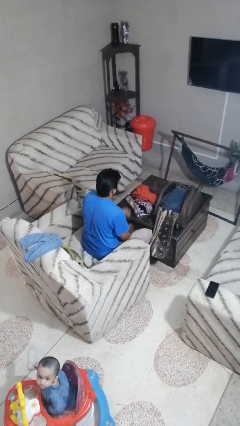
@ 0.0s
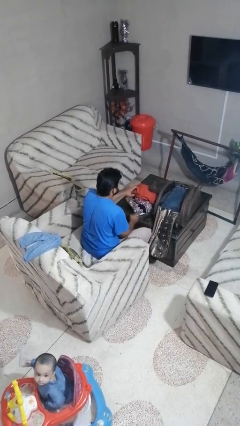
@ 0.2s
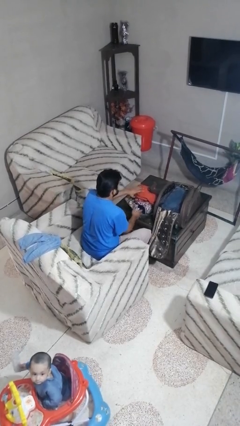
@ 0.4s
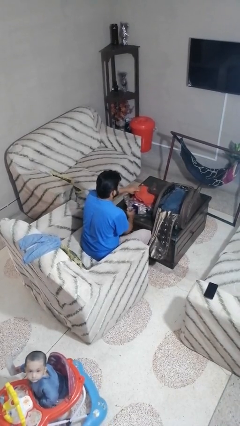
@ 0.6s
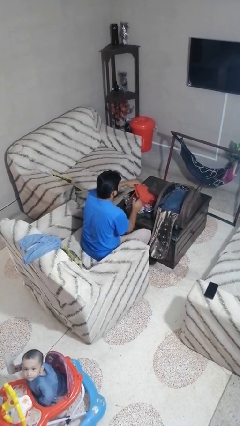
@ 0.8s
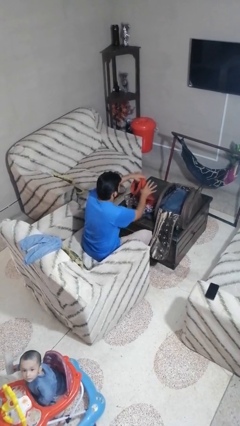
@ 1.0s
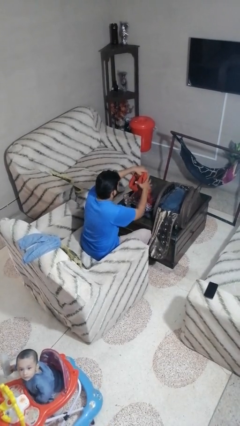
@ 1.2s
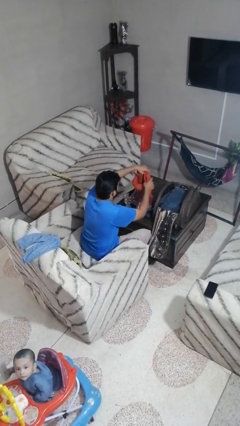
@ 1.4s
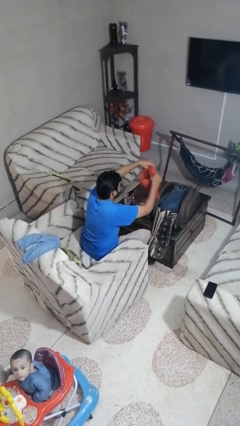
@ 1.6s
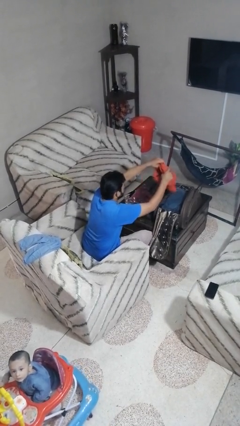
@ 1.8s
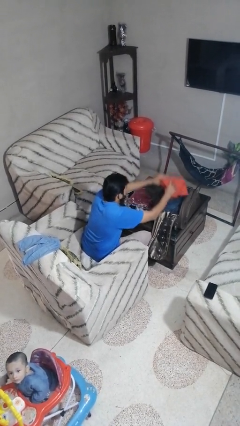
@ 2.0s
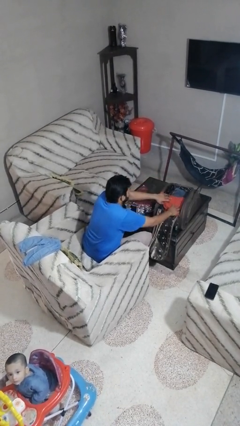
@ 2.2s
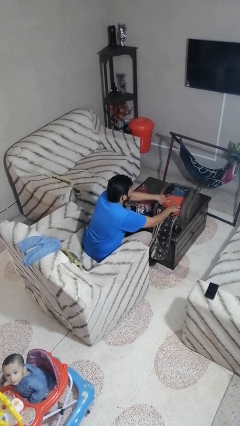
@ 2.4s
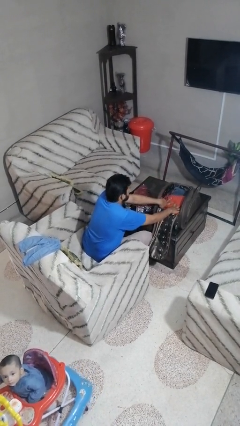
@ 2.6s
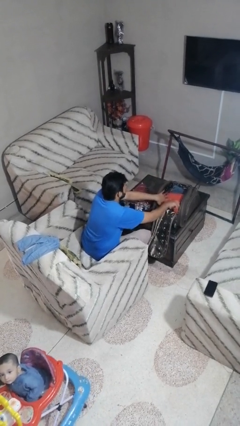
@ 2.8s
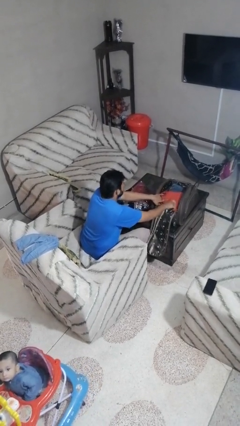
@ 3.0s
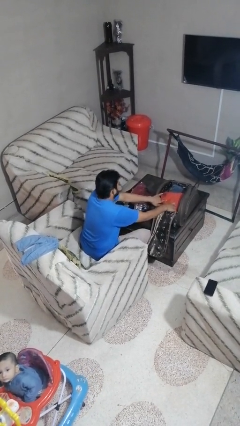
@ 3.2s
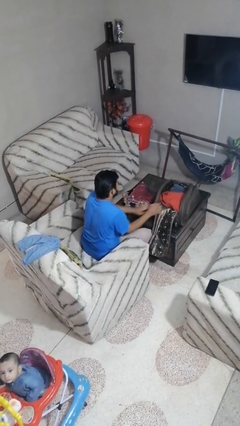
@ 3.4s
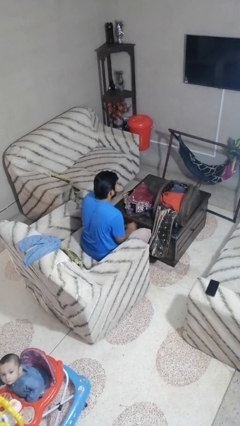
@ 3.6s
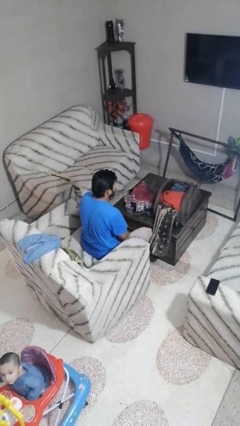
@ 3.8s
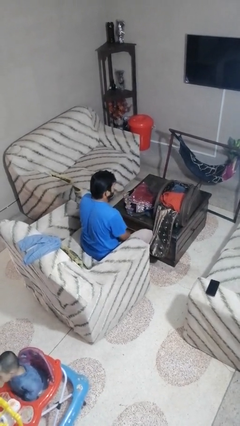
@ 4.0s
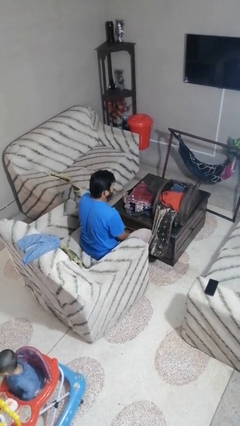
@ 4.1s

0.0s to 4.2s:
person loads clothes into suitcase

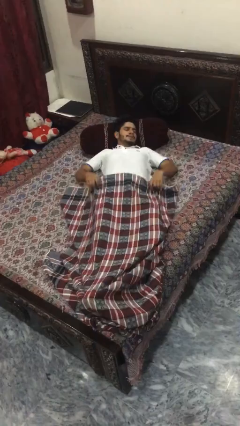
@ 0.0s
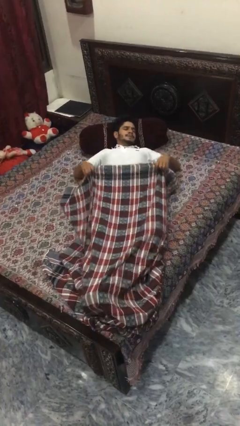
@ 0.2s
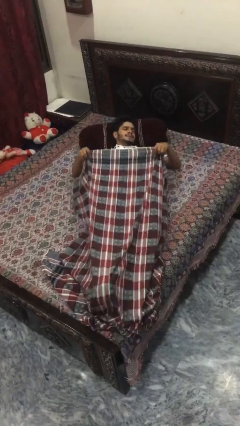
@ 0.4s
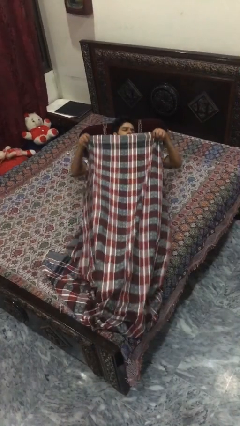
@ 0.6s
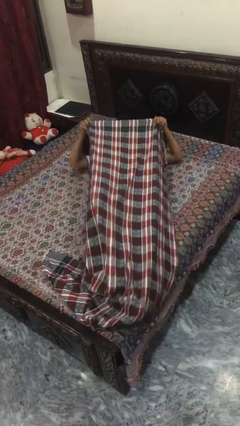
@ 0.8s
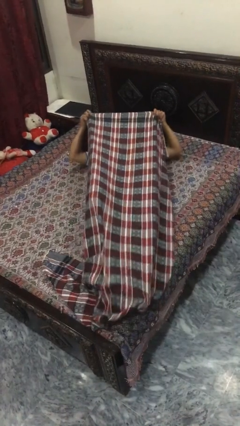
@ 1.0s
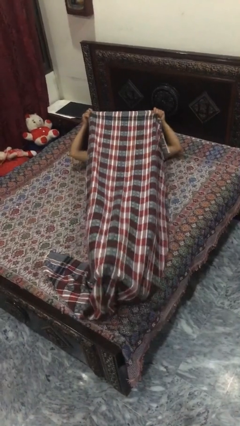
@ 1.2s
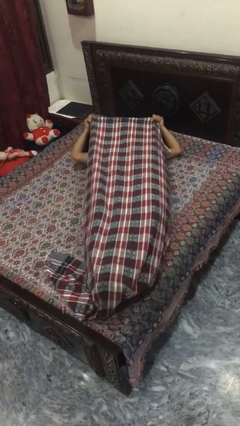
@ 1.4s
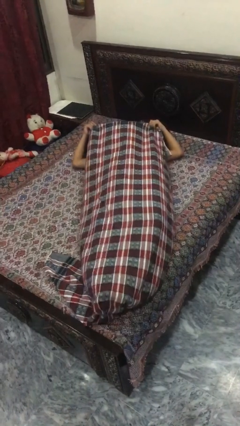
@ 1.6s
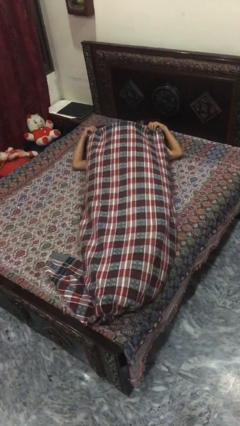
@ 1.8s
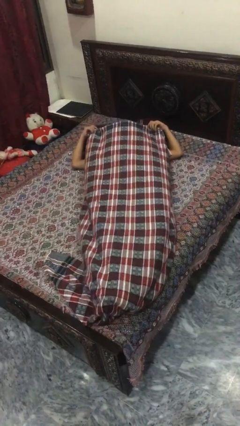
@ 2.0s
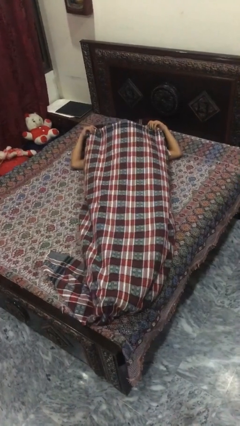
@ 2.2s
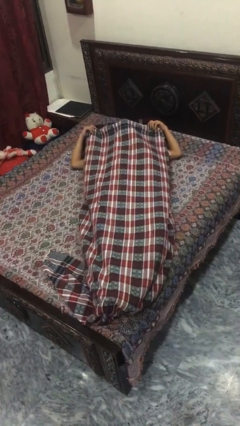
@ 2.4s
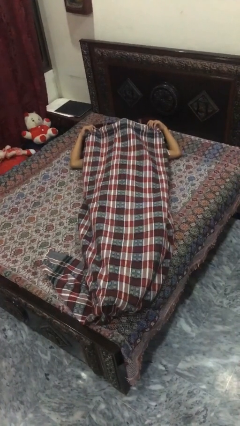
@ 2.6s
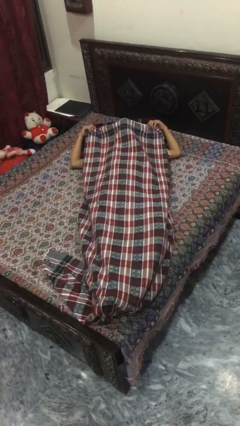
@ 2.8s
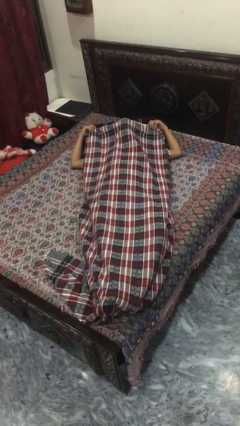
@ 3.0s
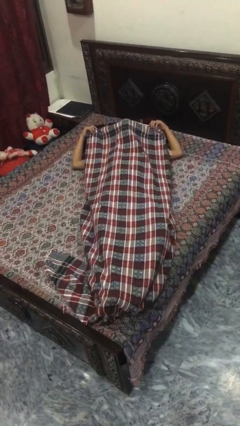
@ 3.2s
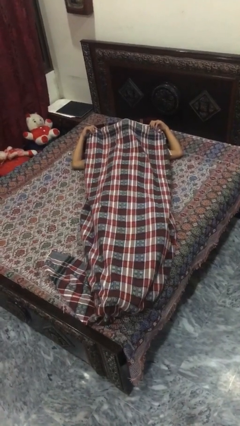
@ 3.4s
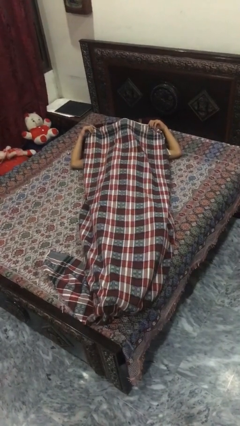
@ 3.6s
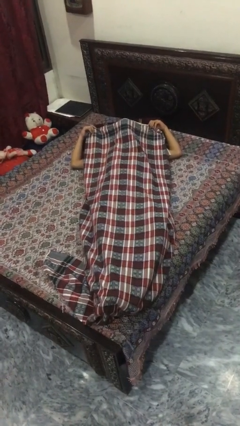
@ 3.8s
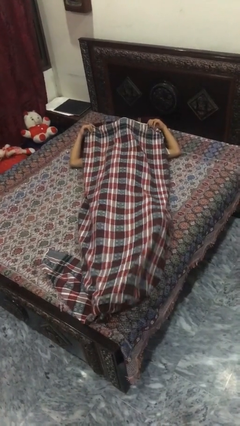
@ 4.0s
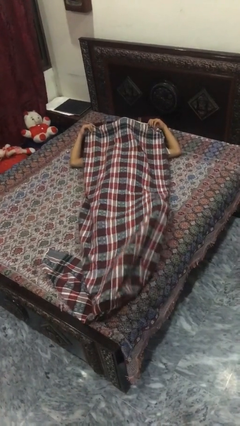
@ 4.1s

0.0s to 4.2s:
person covers with bedsheets

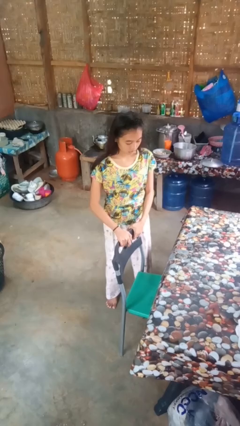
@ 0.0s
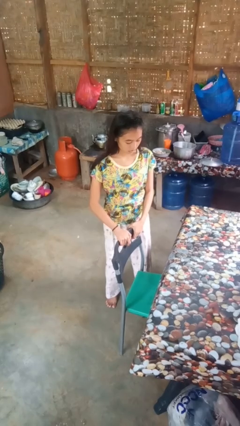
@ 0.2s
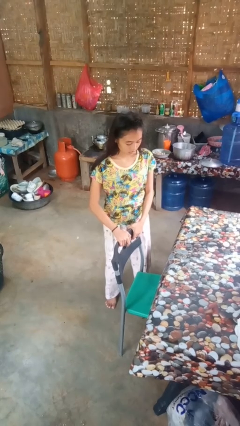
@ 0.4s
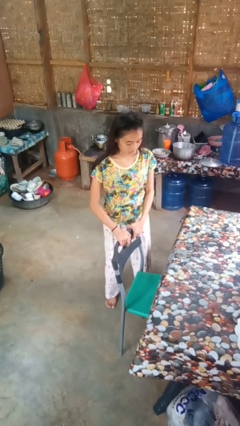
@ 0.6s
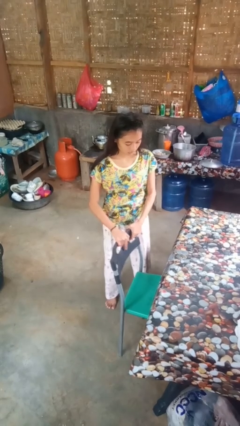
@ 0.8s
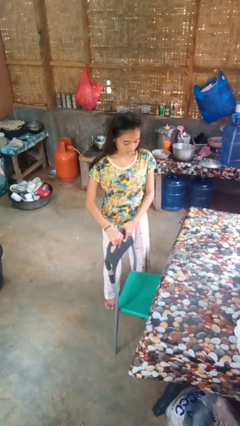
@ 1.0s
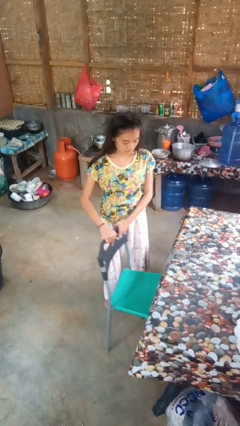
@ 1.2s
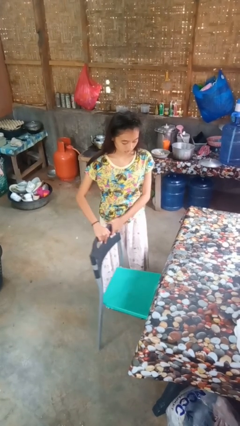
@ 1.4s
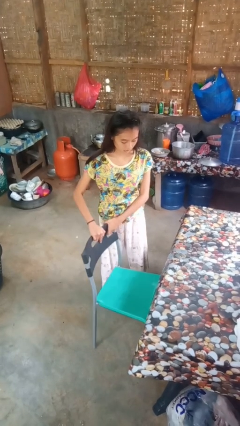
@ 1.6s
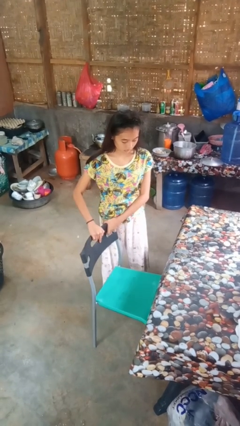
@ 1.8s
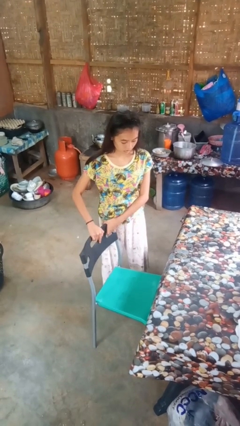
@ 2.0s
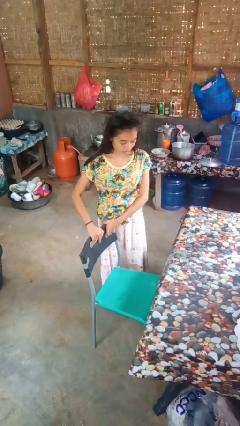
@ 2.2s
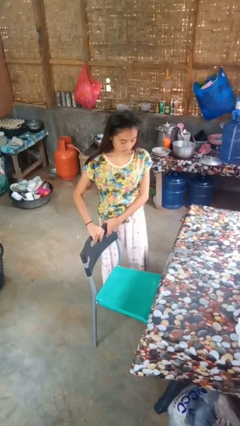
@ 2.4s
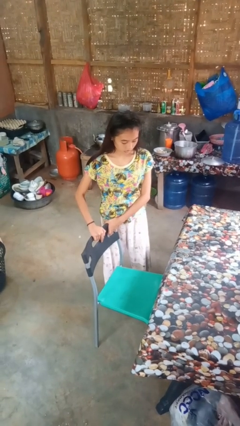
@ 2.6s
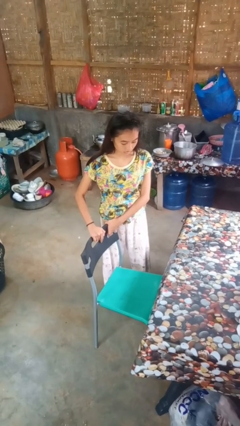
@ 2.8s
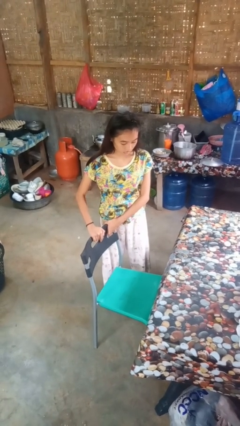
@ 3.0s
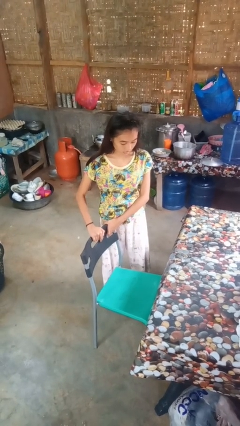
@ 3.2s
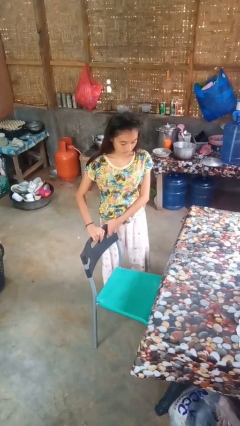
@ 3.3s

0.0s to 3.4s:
person pulls out chair

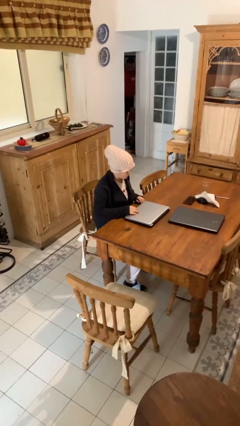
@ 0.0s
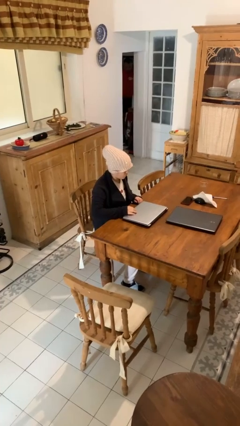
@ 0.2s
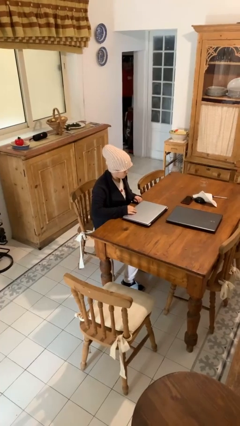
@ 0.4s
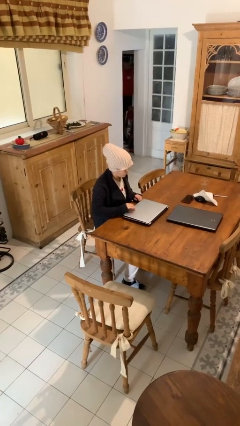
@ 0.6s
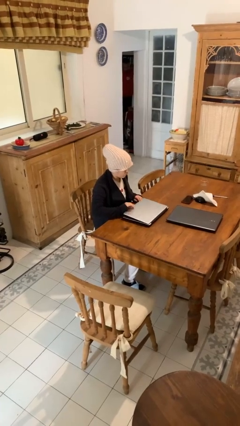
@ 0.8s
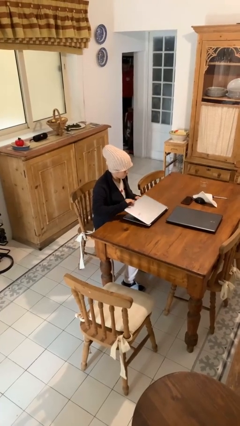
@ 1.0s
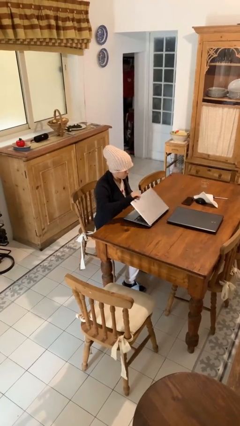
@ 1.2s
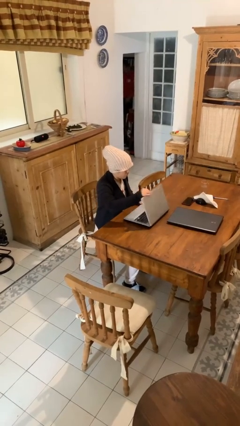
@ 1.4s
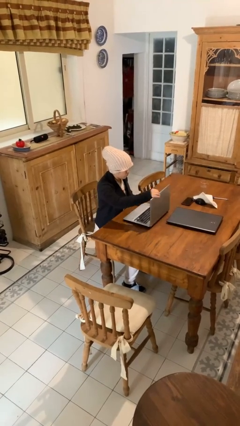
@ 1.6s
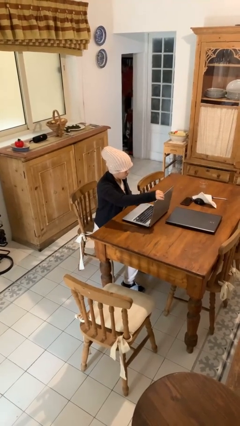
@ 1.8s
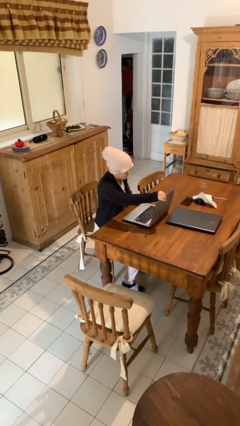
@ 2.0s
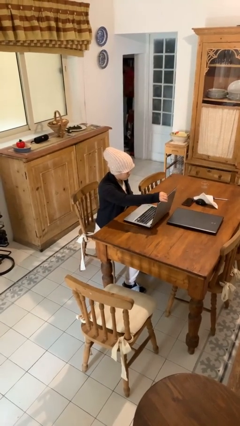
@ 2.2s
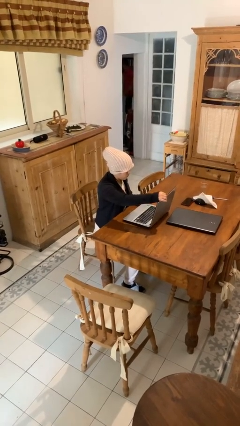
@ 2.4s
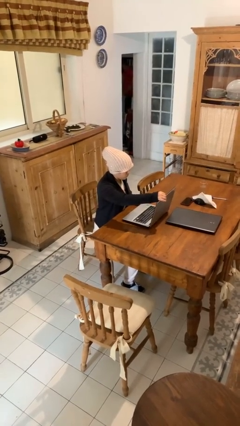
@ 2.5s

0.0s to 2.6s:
person opens laptop

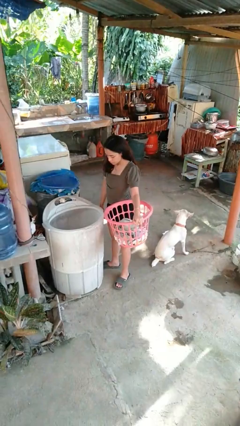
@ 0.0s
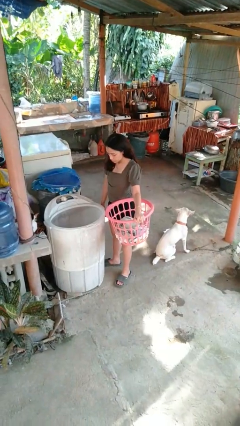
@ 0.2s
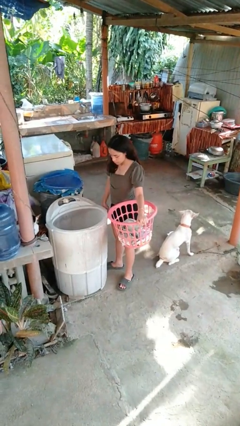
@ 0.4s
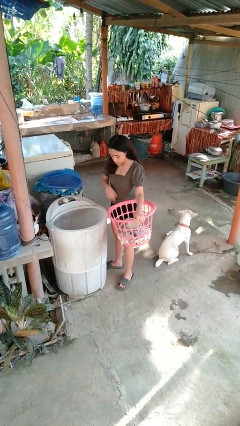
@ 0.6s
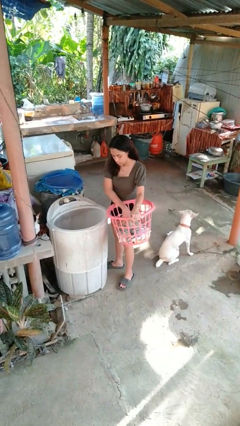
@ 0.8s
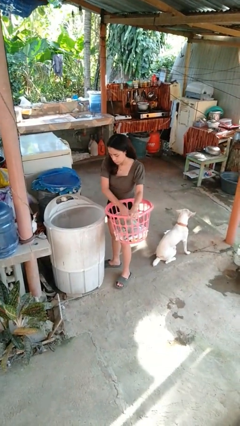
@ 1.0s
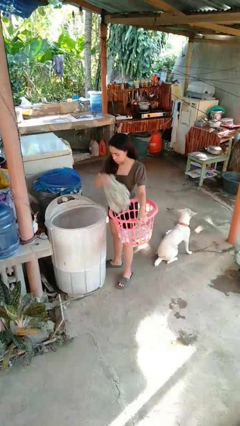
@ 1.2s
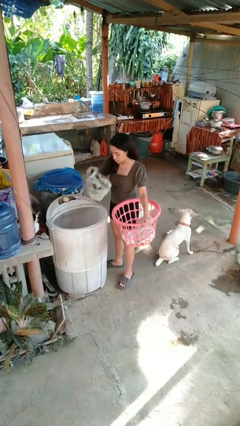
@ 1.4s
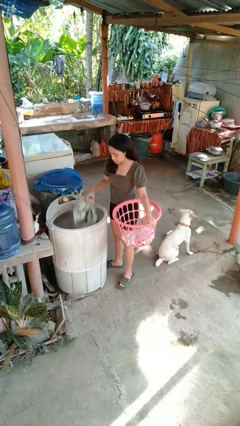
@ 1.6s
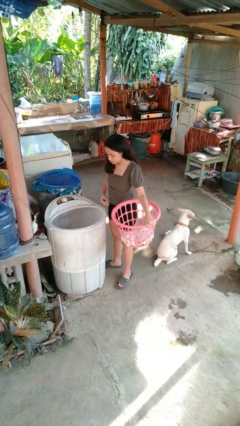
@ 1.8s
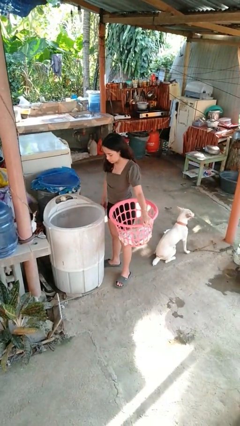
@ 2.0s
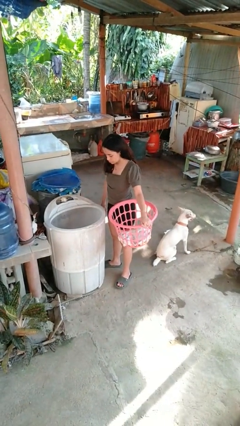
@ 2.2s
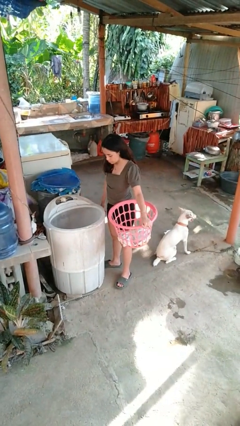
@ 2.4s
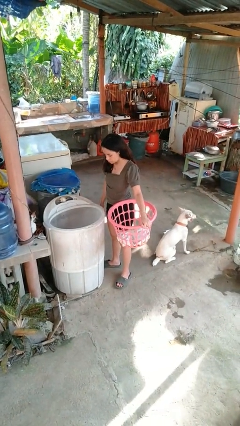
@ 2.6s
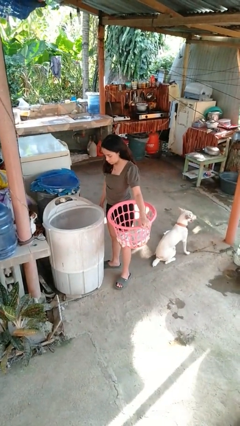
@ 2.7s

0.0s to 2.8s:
person loads dryer

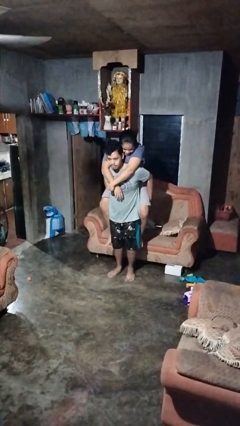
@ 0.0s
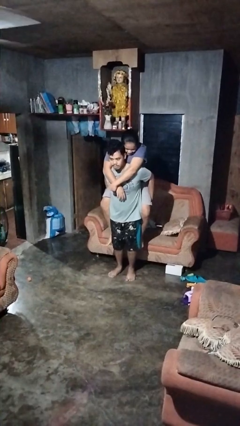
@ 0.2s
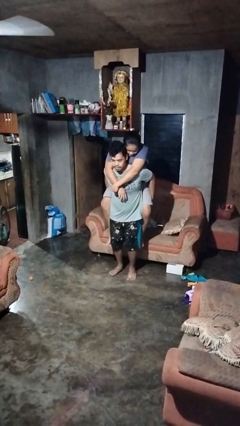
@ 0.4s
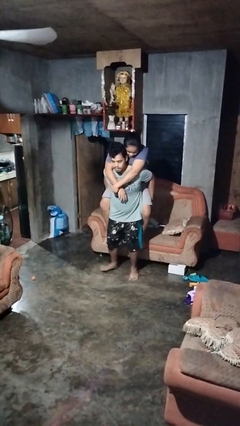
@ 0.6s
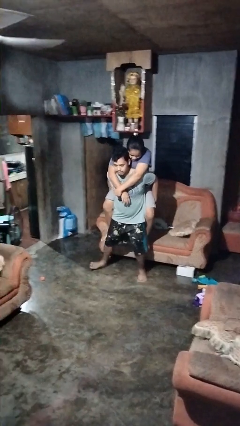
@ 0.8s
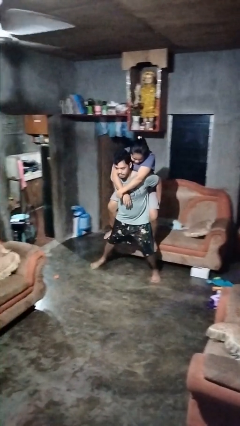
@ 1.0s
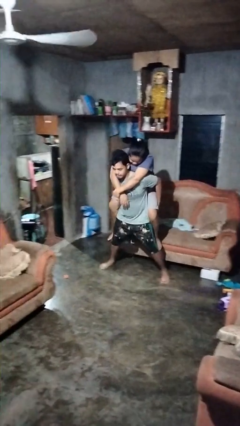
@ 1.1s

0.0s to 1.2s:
person carries person on back
